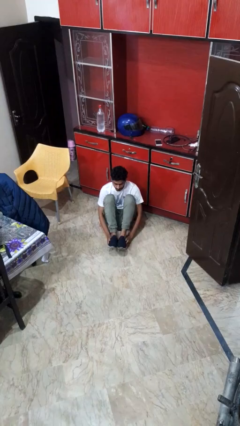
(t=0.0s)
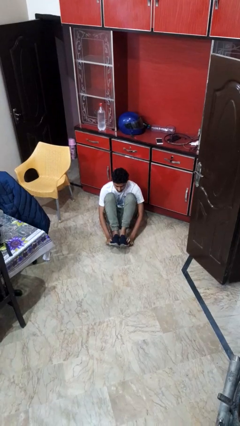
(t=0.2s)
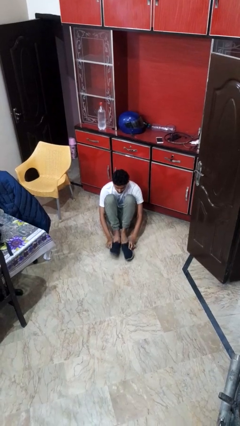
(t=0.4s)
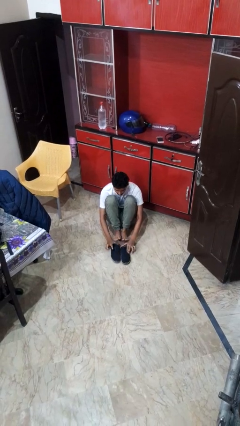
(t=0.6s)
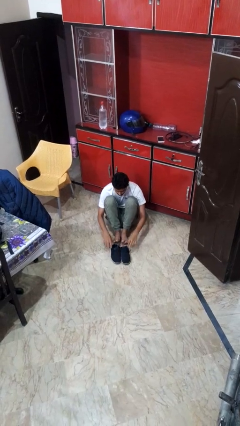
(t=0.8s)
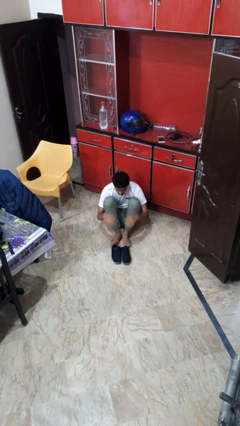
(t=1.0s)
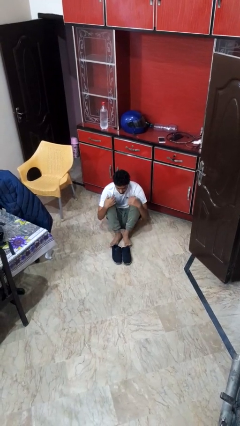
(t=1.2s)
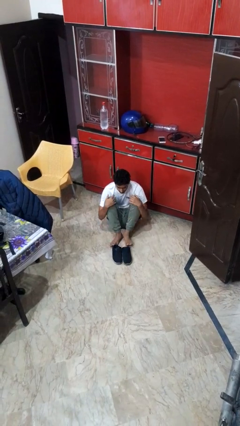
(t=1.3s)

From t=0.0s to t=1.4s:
person takes off shoes

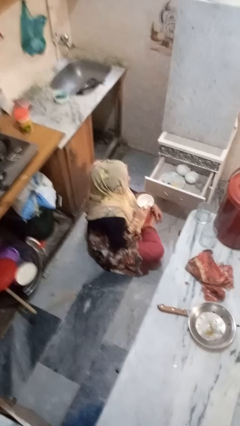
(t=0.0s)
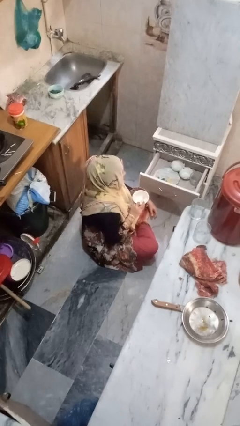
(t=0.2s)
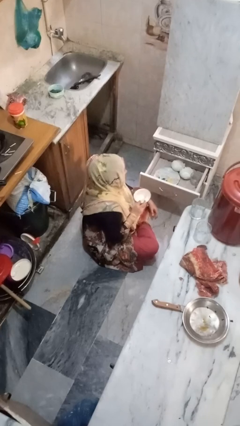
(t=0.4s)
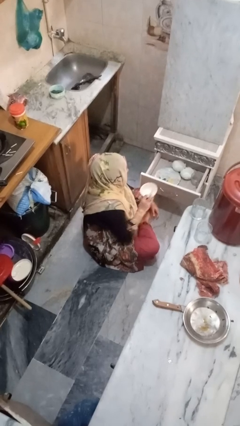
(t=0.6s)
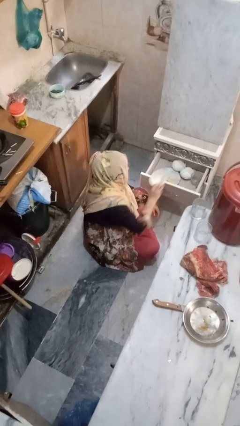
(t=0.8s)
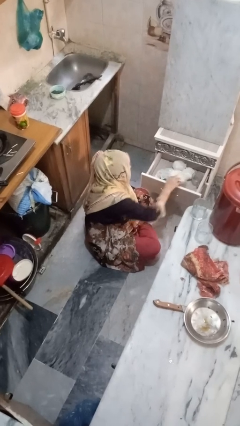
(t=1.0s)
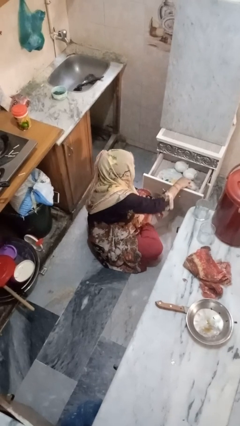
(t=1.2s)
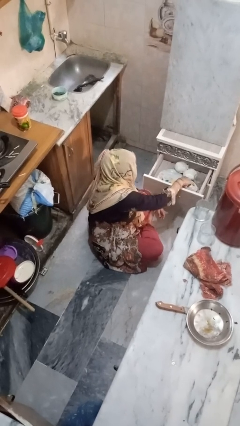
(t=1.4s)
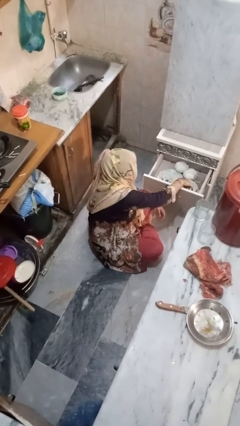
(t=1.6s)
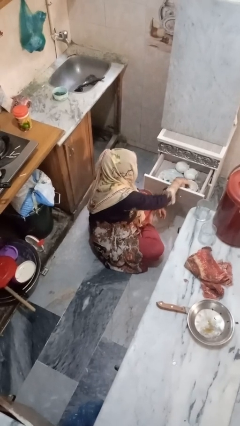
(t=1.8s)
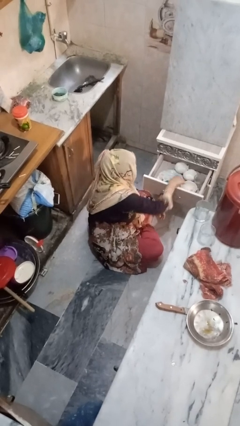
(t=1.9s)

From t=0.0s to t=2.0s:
person puts object into kitchen drawer

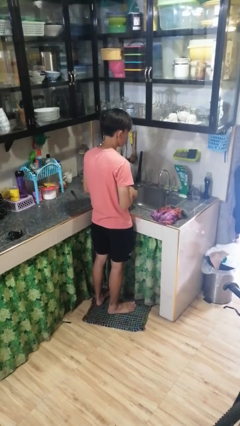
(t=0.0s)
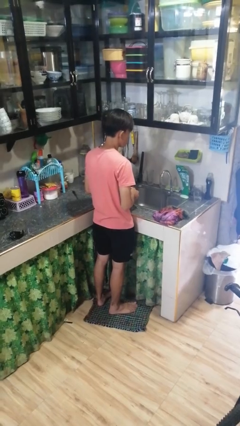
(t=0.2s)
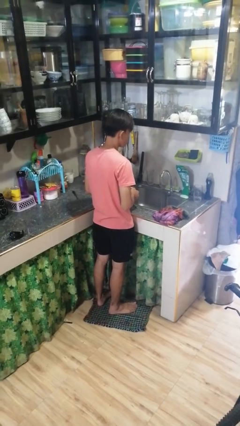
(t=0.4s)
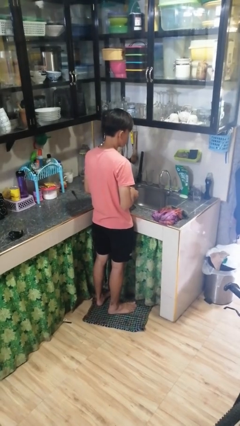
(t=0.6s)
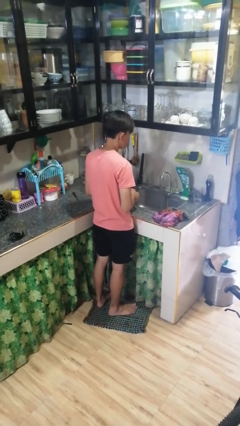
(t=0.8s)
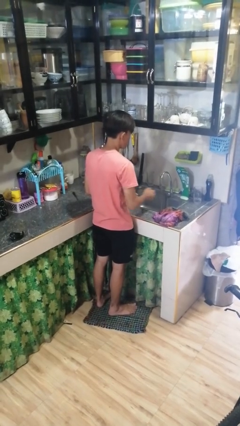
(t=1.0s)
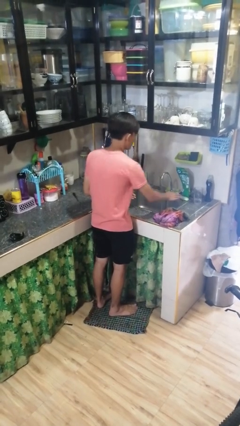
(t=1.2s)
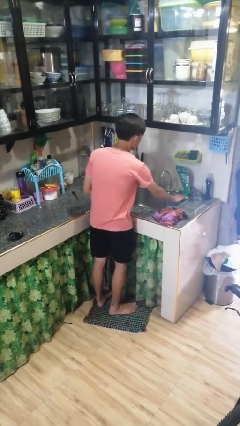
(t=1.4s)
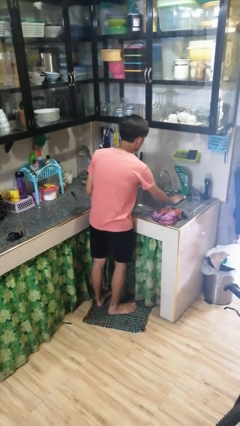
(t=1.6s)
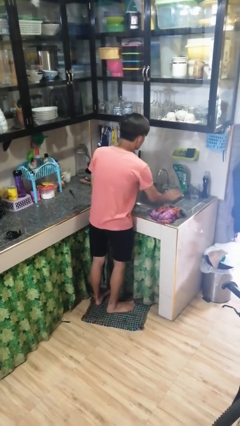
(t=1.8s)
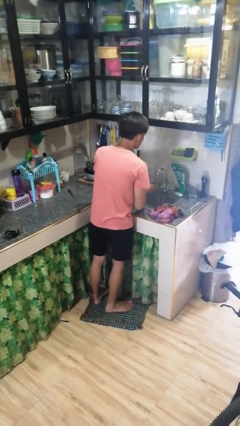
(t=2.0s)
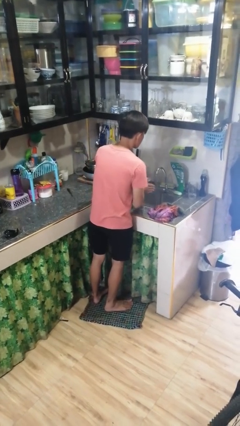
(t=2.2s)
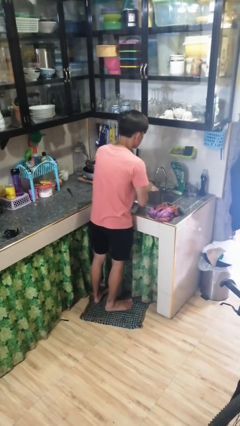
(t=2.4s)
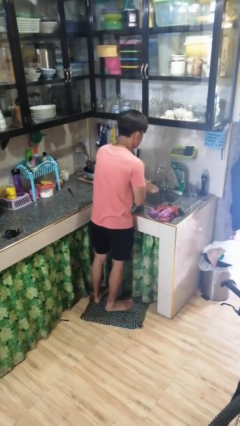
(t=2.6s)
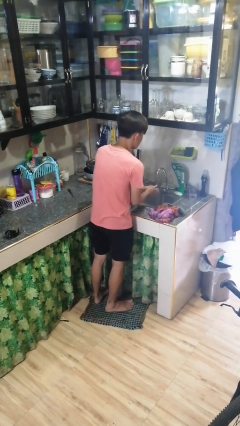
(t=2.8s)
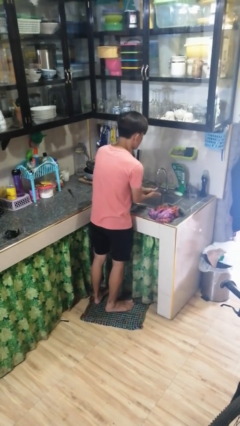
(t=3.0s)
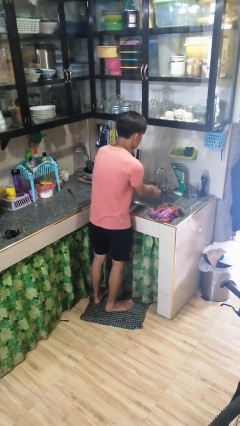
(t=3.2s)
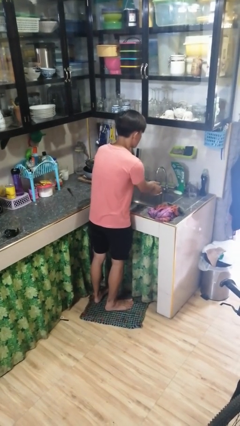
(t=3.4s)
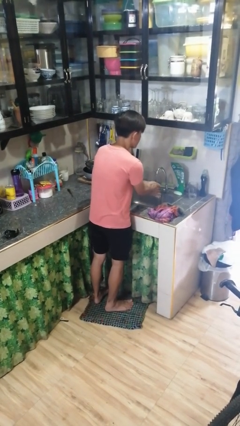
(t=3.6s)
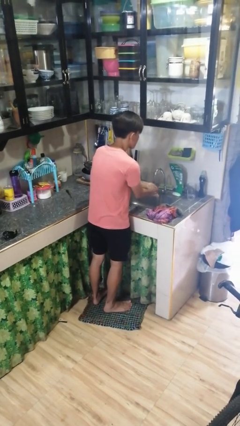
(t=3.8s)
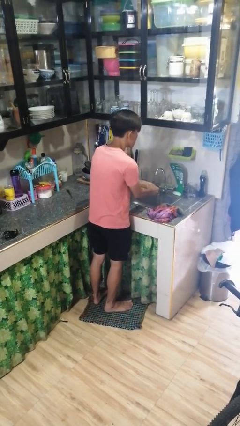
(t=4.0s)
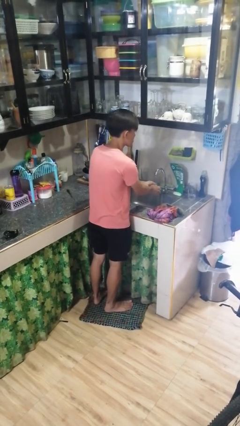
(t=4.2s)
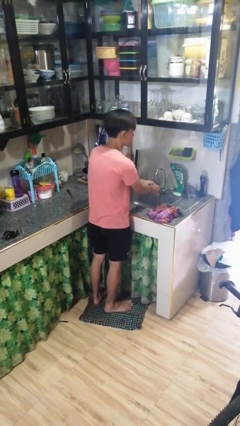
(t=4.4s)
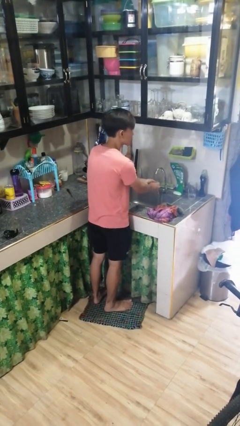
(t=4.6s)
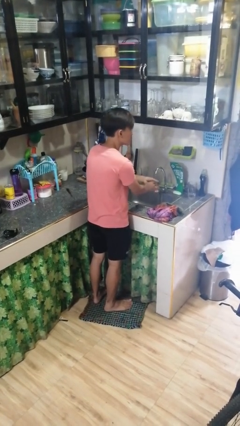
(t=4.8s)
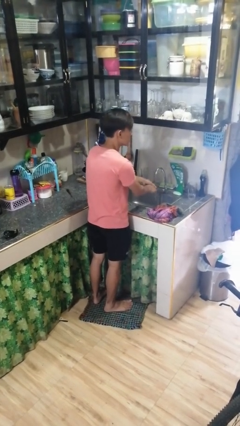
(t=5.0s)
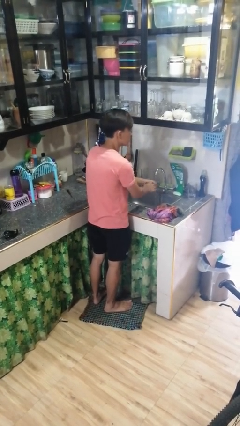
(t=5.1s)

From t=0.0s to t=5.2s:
person washes hands

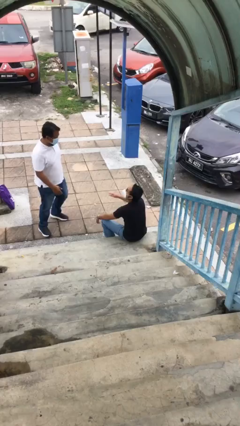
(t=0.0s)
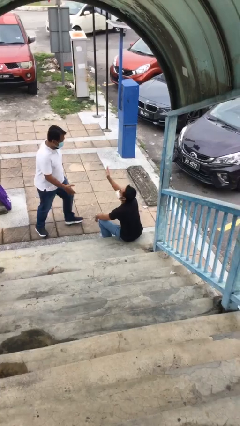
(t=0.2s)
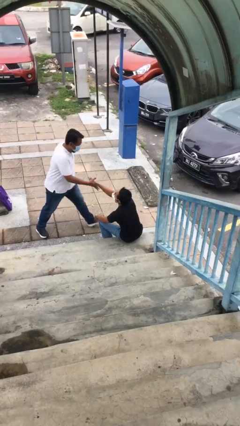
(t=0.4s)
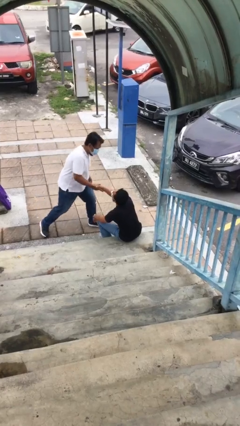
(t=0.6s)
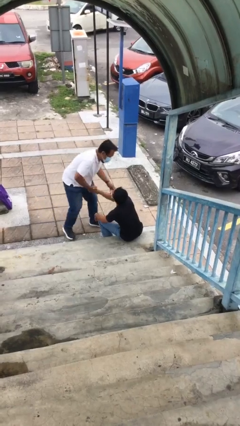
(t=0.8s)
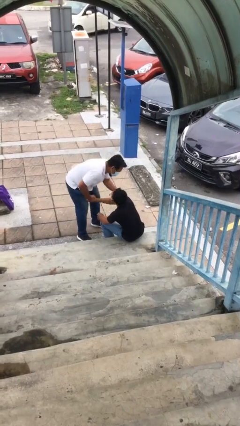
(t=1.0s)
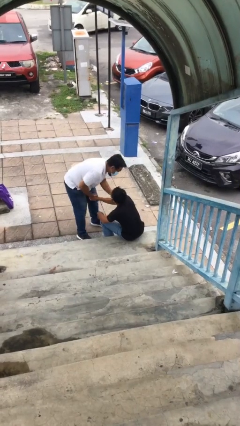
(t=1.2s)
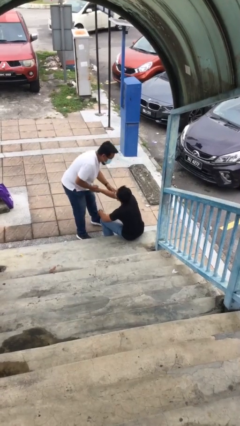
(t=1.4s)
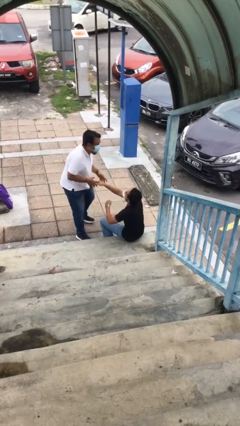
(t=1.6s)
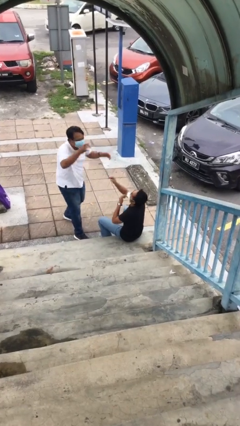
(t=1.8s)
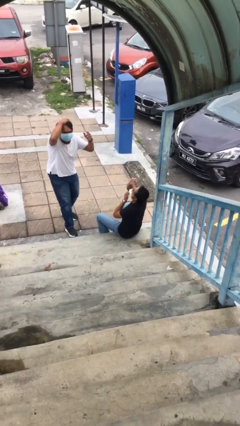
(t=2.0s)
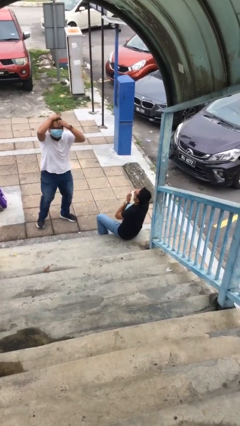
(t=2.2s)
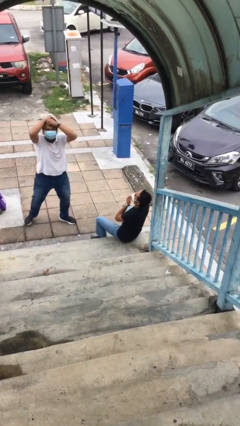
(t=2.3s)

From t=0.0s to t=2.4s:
person shakes hand

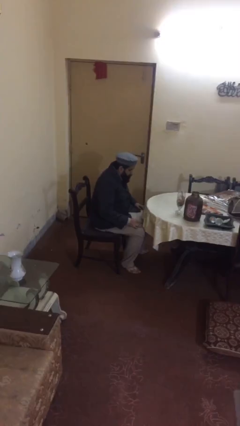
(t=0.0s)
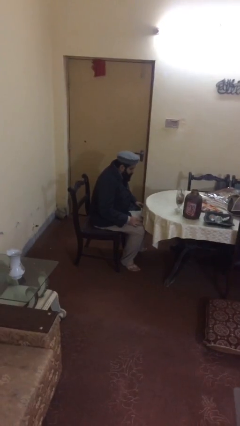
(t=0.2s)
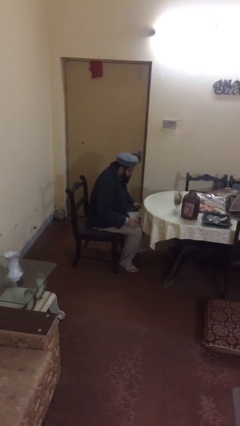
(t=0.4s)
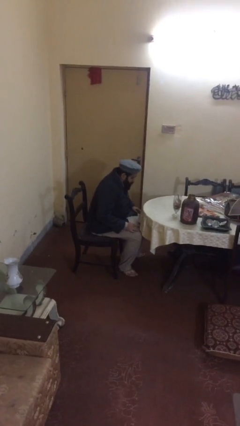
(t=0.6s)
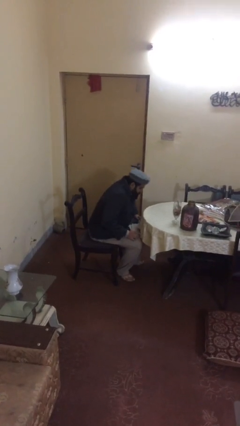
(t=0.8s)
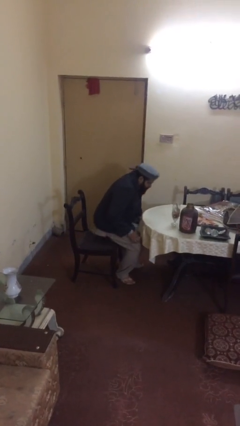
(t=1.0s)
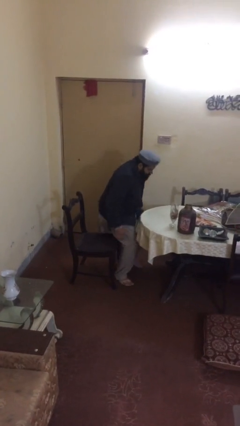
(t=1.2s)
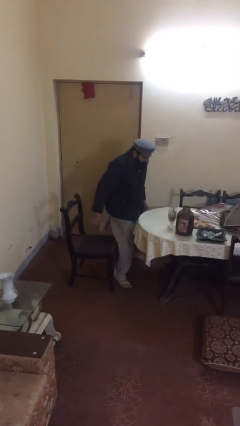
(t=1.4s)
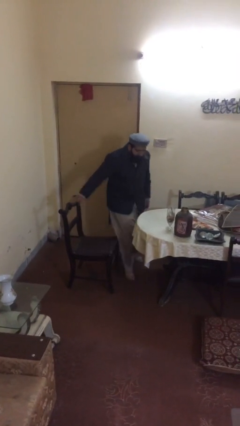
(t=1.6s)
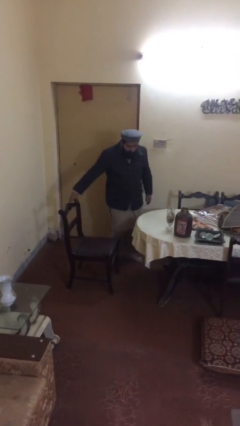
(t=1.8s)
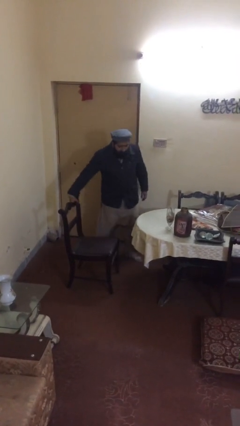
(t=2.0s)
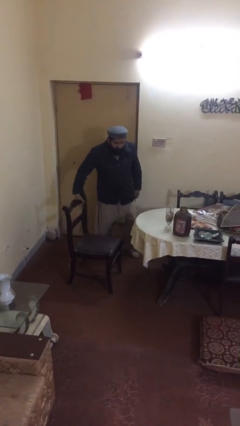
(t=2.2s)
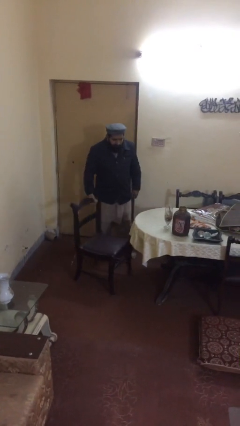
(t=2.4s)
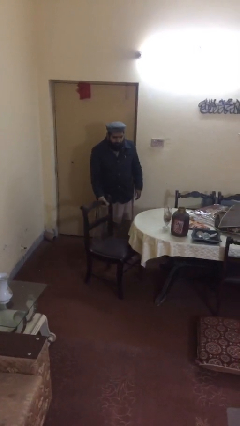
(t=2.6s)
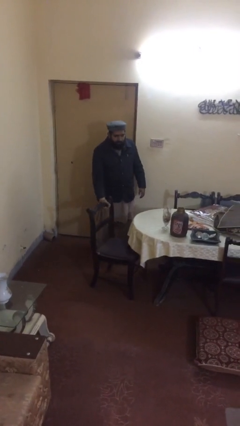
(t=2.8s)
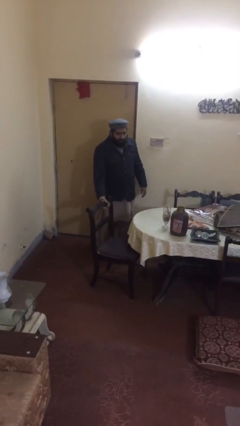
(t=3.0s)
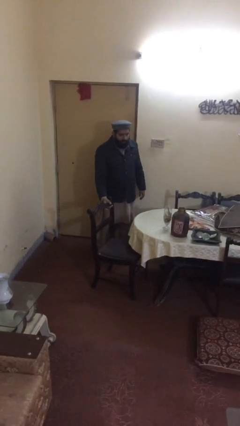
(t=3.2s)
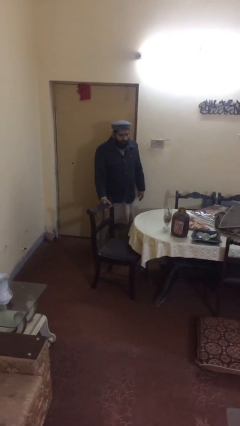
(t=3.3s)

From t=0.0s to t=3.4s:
person stands up

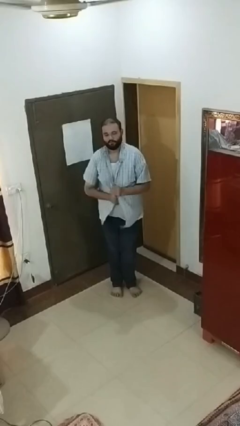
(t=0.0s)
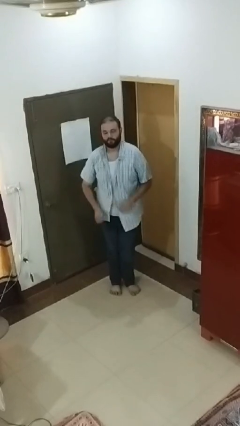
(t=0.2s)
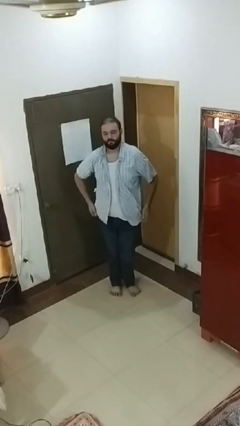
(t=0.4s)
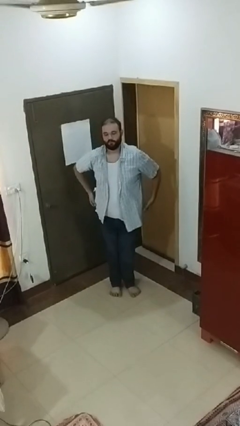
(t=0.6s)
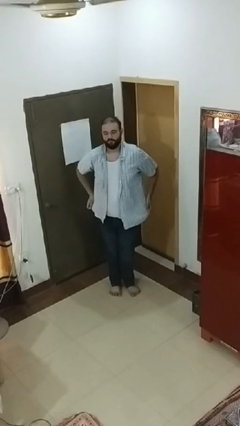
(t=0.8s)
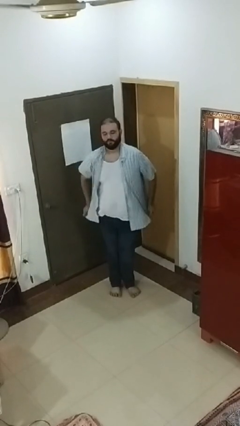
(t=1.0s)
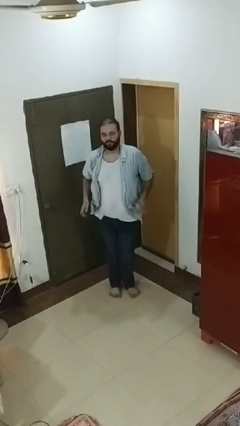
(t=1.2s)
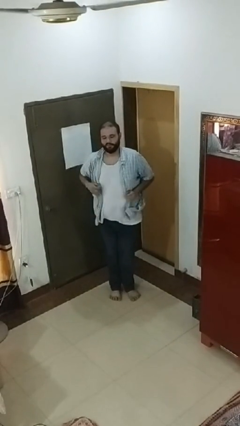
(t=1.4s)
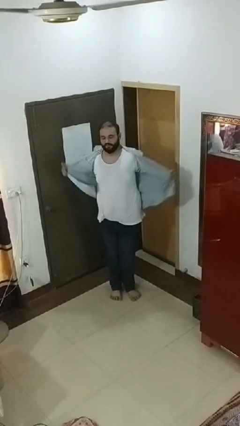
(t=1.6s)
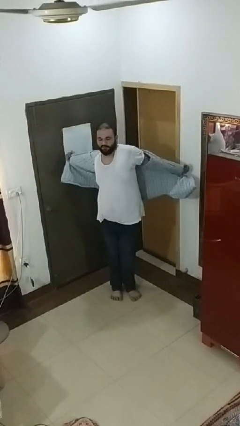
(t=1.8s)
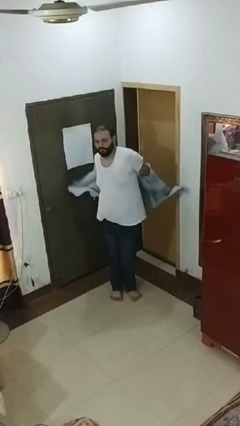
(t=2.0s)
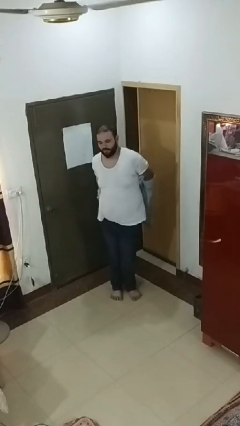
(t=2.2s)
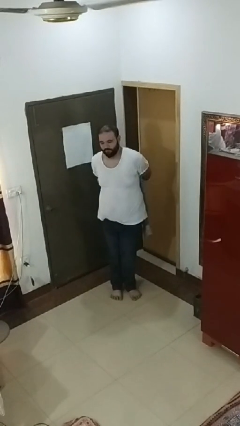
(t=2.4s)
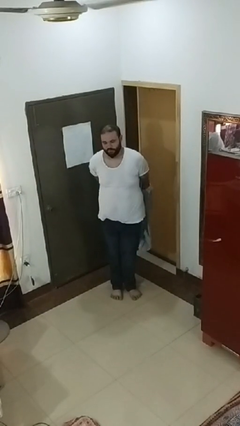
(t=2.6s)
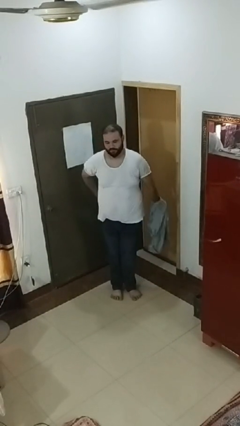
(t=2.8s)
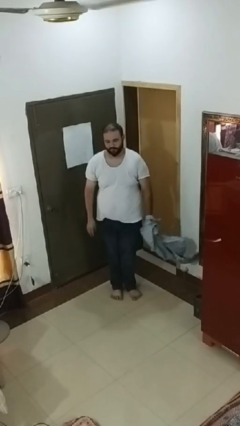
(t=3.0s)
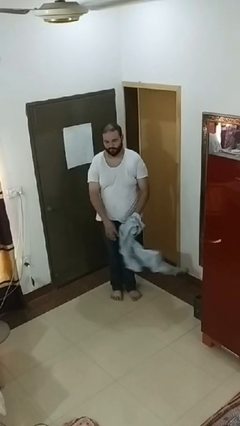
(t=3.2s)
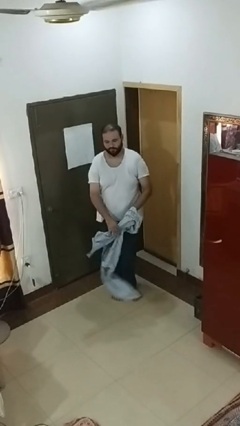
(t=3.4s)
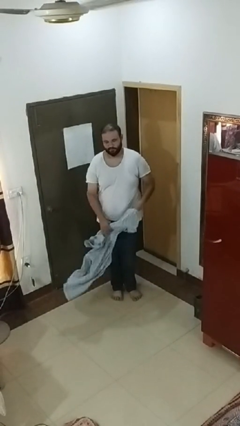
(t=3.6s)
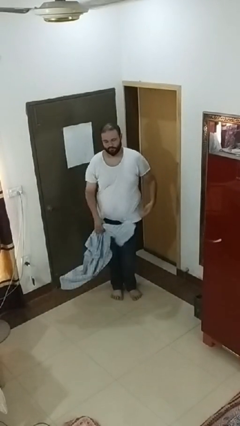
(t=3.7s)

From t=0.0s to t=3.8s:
person takes off shirt
